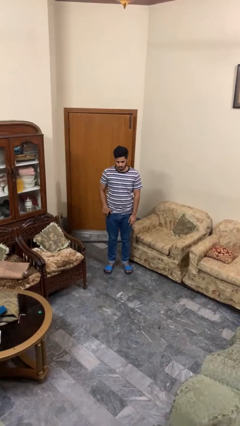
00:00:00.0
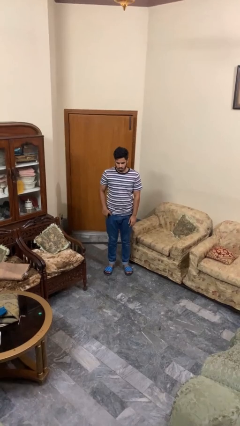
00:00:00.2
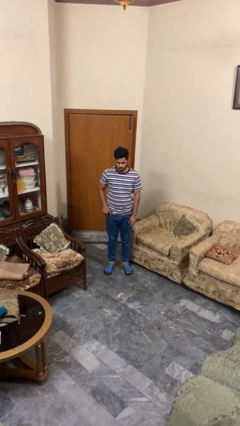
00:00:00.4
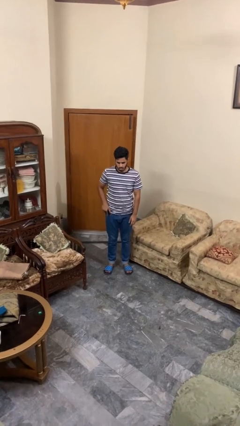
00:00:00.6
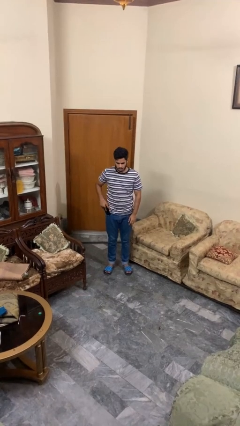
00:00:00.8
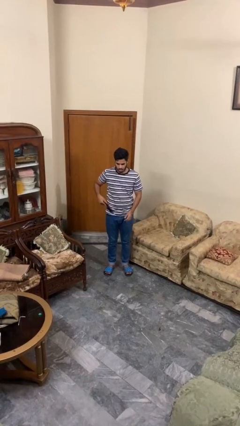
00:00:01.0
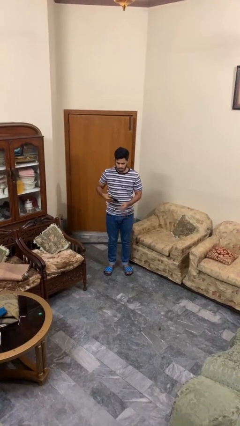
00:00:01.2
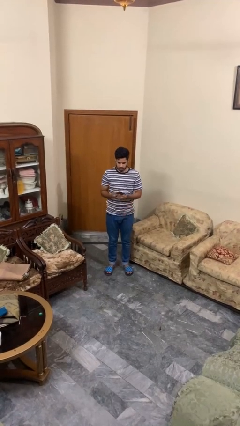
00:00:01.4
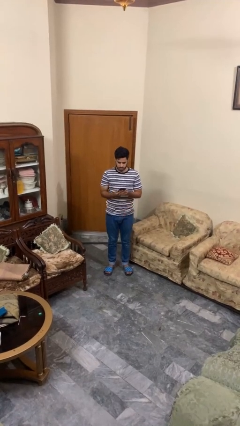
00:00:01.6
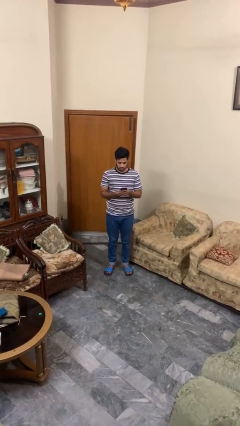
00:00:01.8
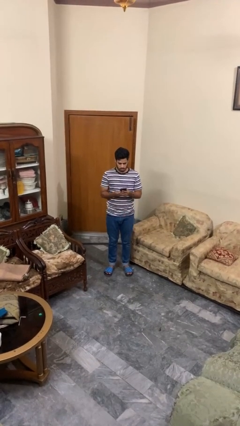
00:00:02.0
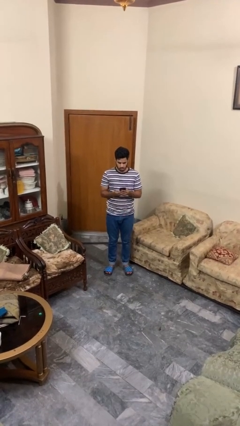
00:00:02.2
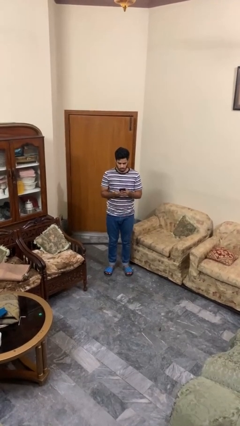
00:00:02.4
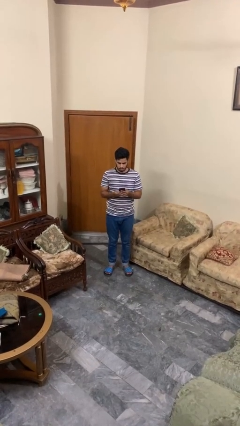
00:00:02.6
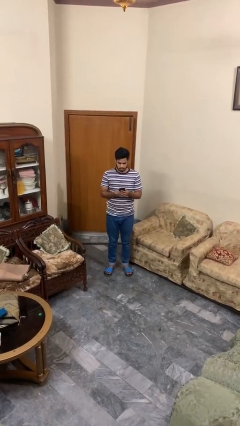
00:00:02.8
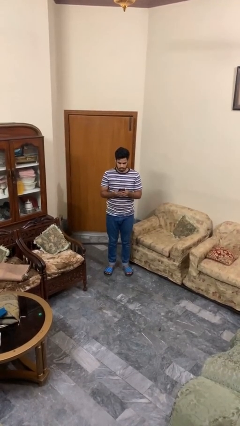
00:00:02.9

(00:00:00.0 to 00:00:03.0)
person takes phone from pocket

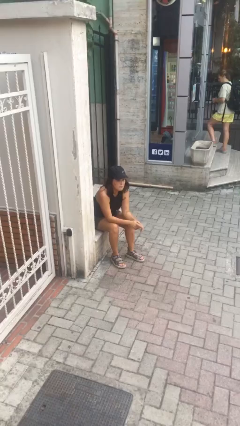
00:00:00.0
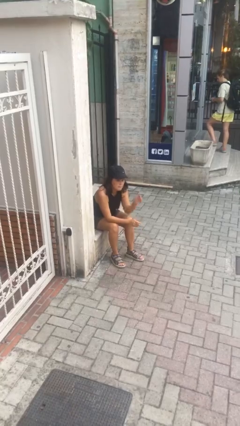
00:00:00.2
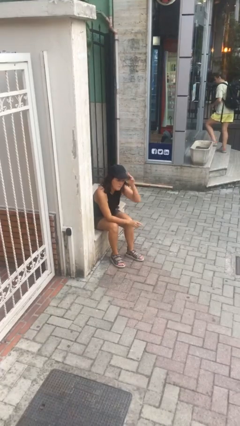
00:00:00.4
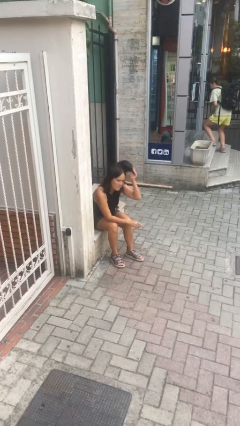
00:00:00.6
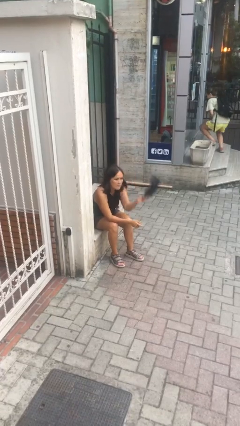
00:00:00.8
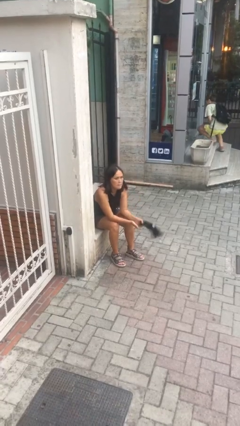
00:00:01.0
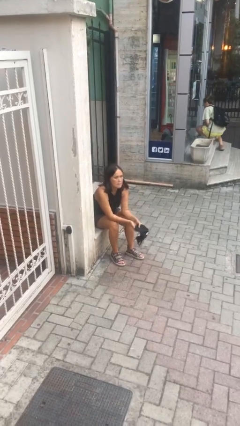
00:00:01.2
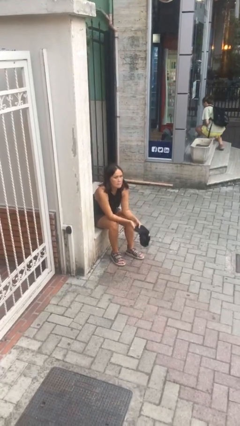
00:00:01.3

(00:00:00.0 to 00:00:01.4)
person takes off hat

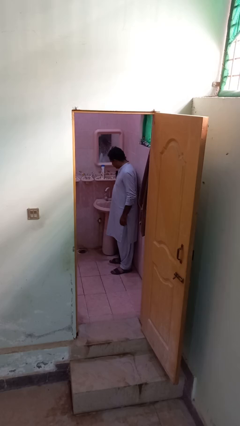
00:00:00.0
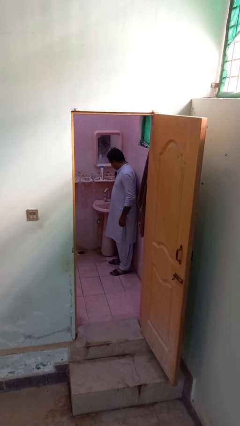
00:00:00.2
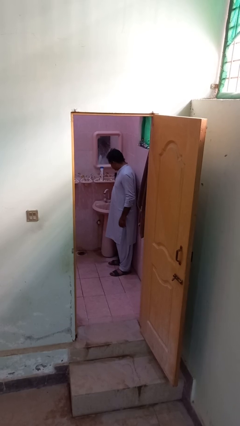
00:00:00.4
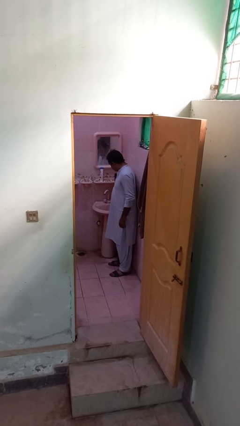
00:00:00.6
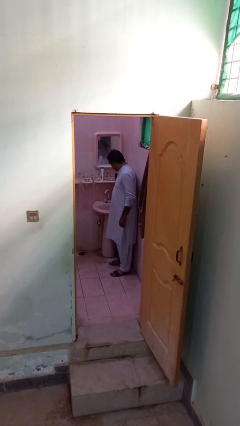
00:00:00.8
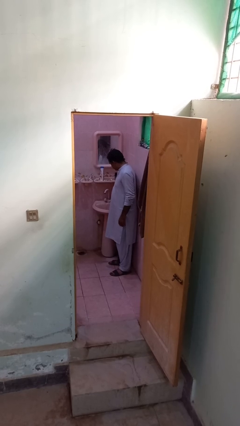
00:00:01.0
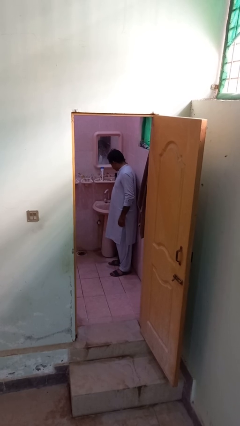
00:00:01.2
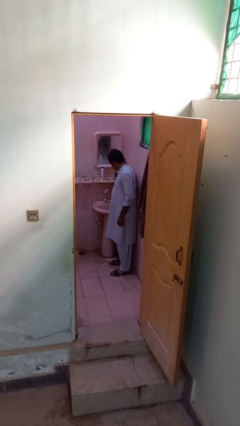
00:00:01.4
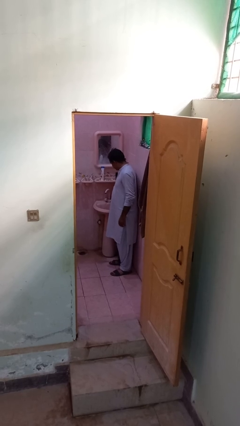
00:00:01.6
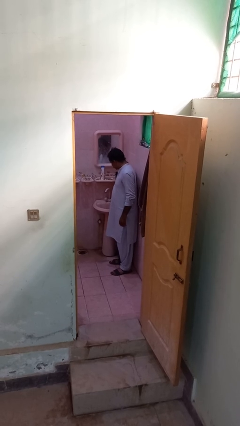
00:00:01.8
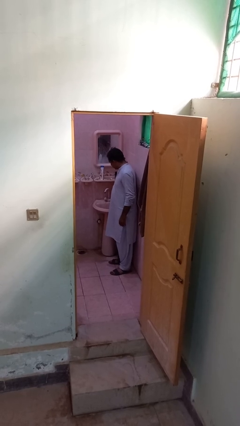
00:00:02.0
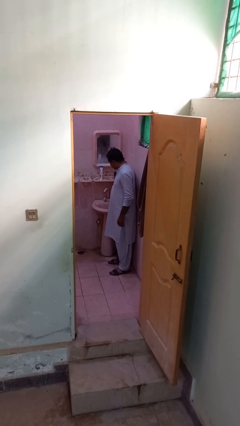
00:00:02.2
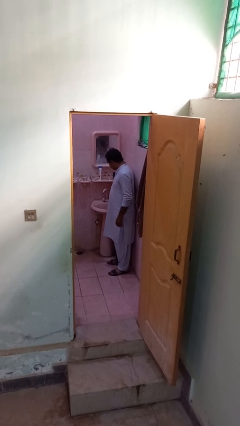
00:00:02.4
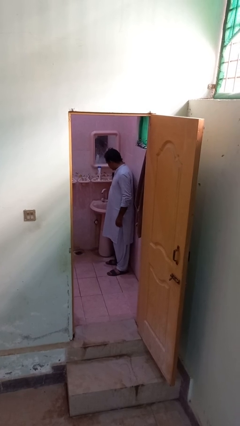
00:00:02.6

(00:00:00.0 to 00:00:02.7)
person turns off faucet

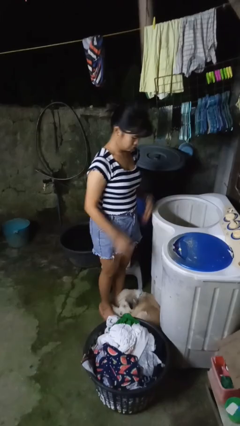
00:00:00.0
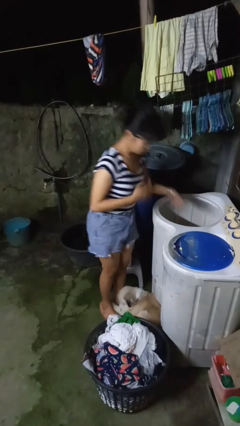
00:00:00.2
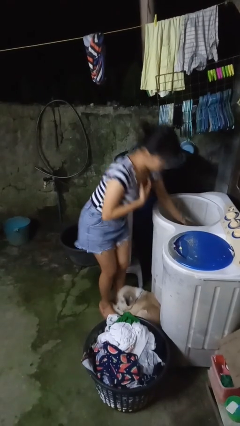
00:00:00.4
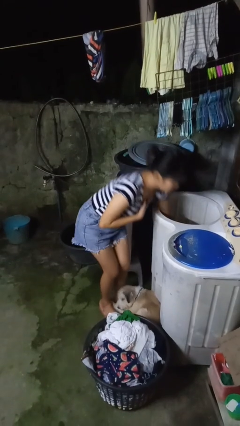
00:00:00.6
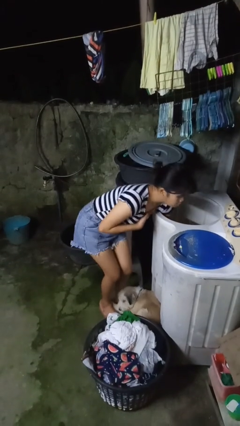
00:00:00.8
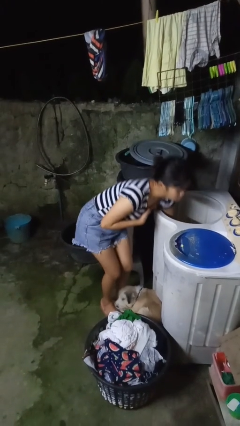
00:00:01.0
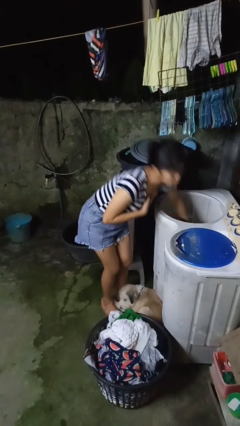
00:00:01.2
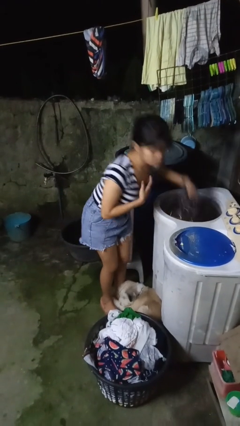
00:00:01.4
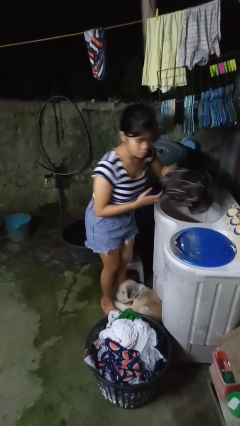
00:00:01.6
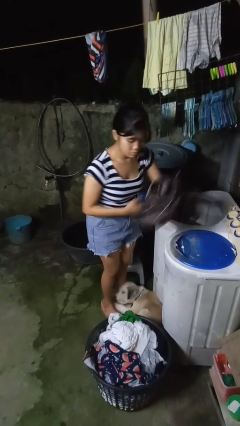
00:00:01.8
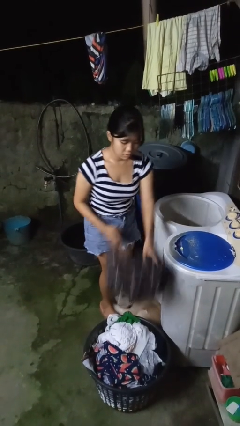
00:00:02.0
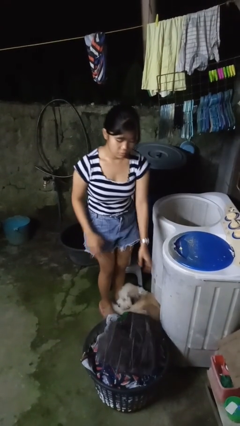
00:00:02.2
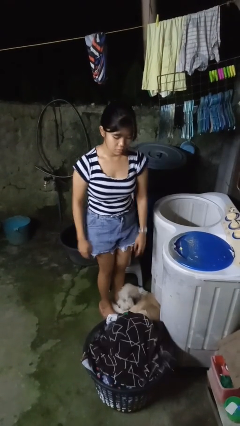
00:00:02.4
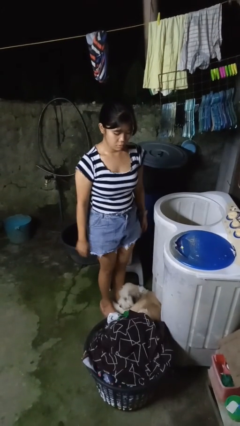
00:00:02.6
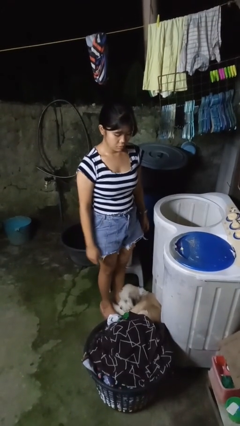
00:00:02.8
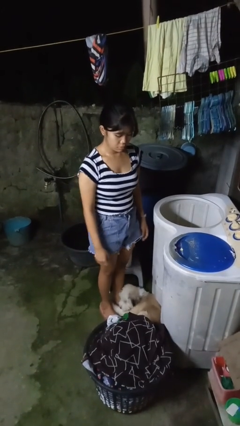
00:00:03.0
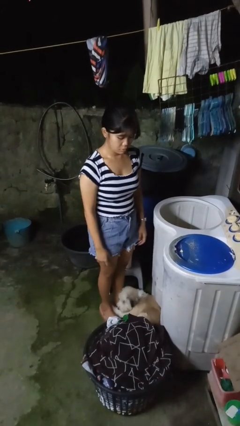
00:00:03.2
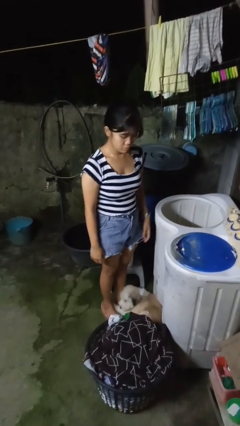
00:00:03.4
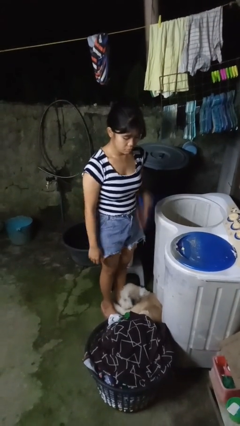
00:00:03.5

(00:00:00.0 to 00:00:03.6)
person unloads clotheswasher

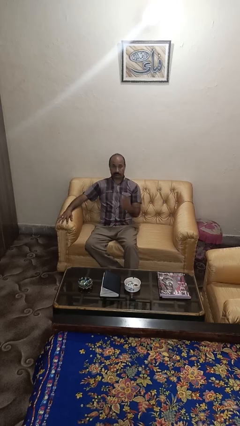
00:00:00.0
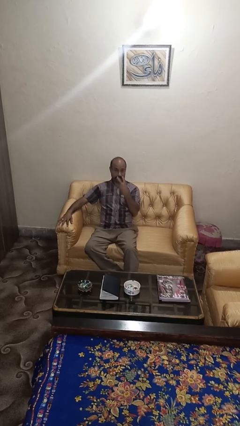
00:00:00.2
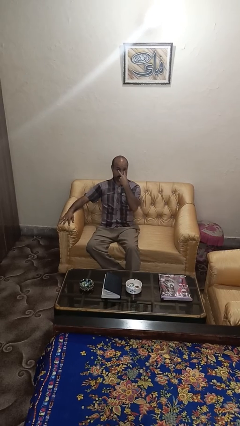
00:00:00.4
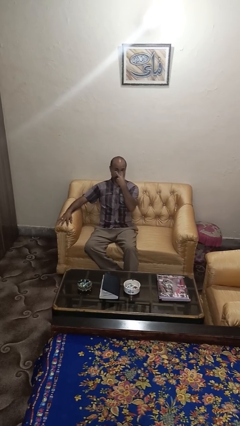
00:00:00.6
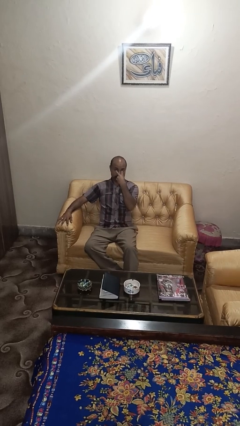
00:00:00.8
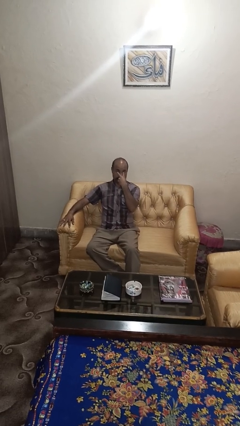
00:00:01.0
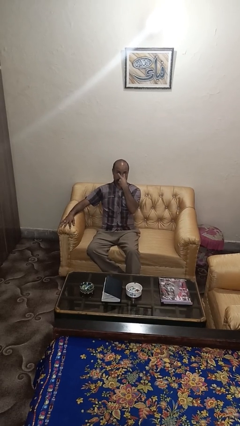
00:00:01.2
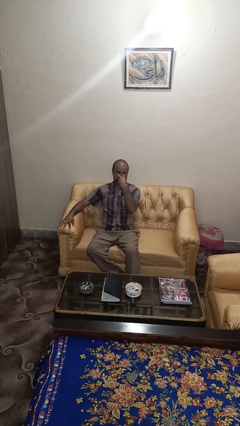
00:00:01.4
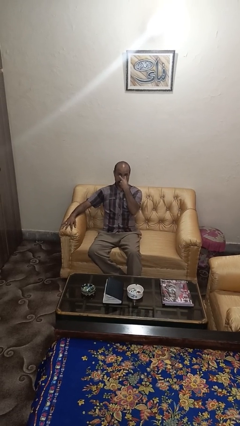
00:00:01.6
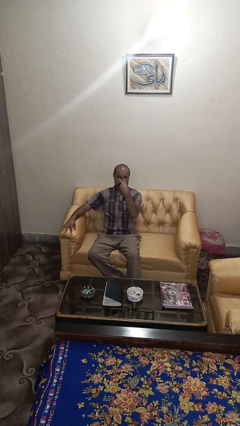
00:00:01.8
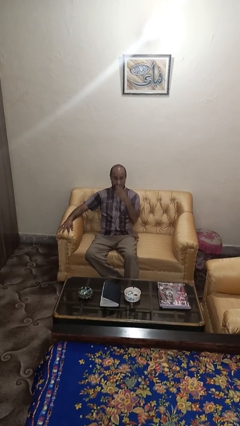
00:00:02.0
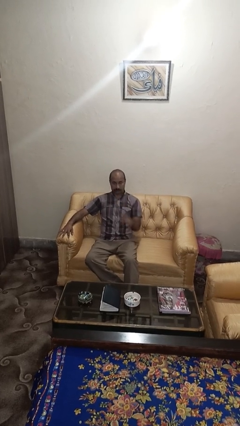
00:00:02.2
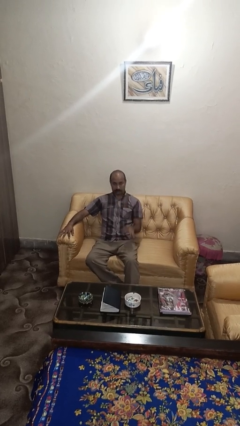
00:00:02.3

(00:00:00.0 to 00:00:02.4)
person gestures watch closely

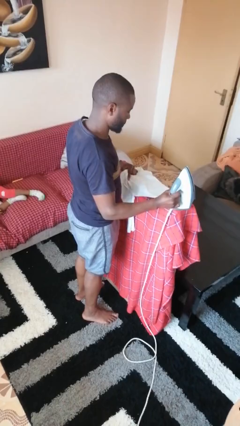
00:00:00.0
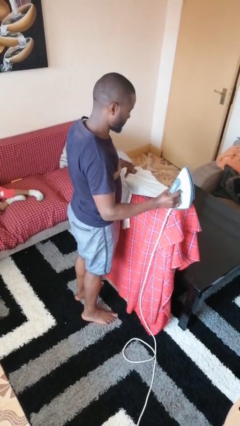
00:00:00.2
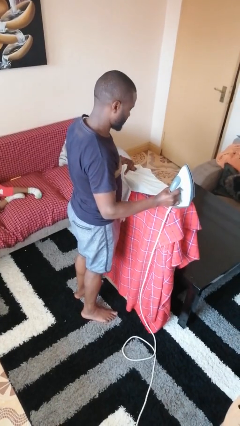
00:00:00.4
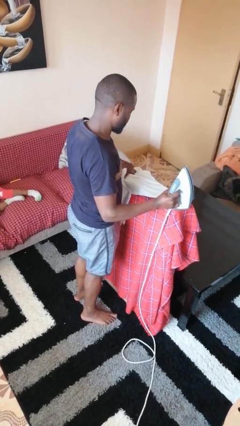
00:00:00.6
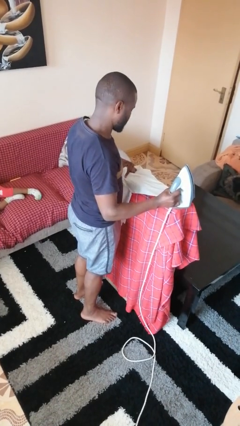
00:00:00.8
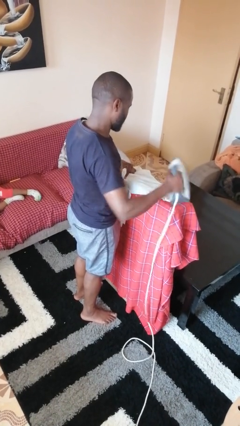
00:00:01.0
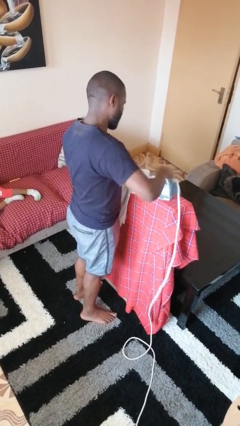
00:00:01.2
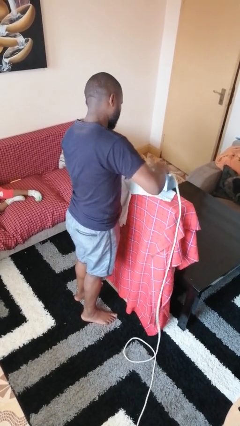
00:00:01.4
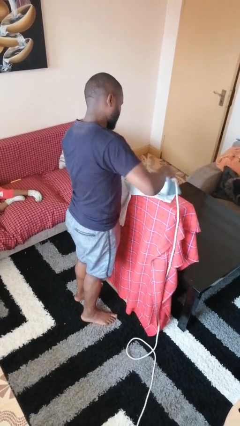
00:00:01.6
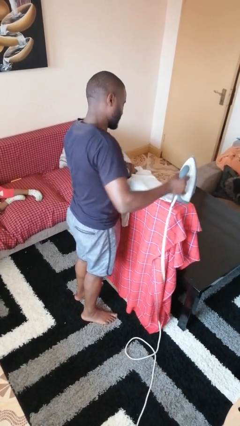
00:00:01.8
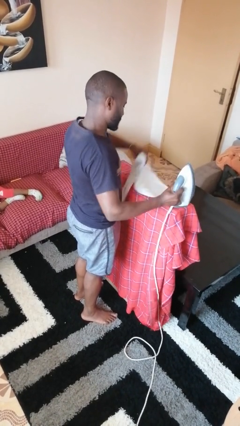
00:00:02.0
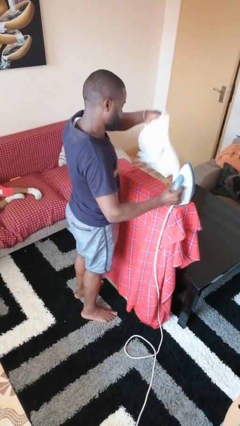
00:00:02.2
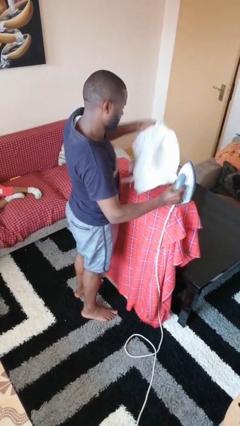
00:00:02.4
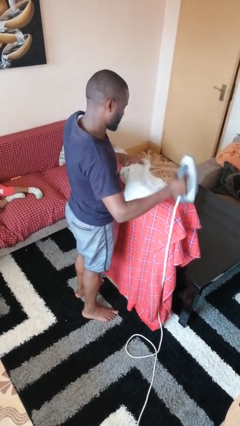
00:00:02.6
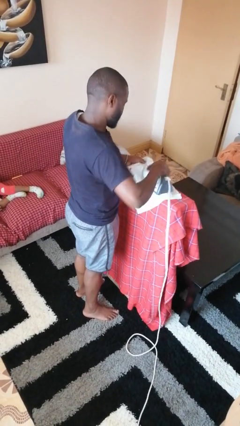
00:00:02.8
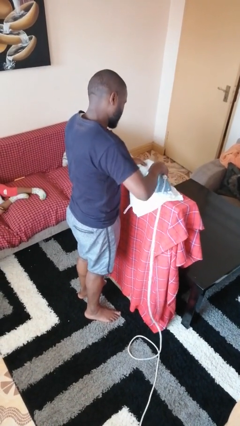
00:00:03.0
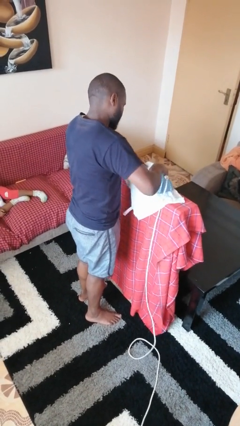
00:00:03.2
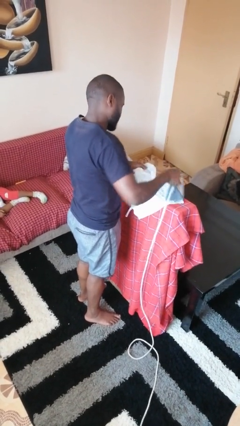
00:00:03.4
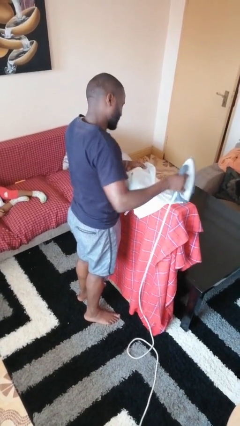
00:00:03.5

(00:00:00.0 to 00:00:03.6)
person irons clothes

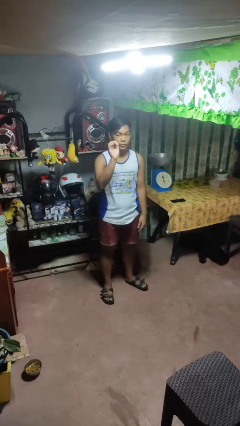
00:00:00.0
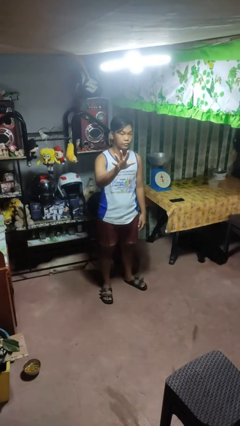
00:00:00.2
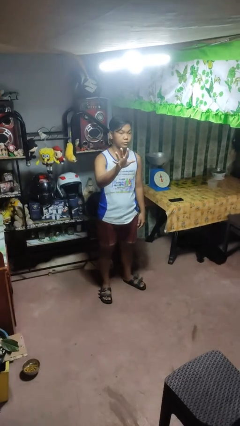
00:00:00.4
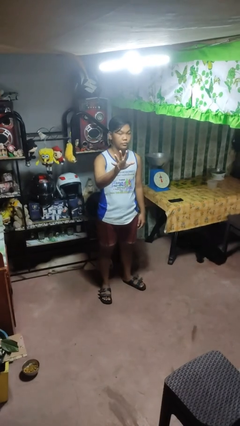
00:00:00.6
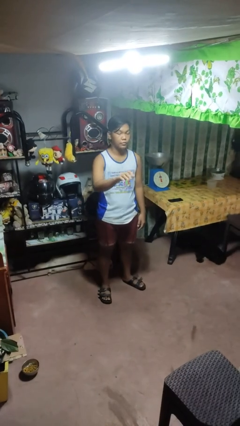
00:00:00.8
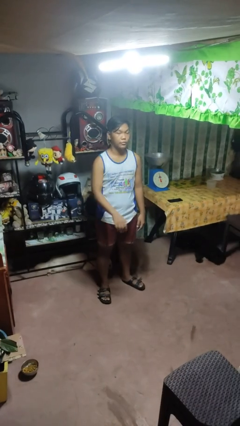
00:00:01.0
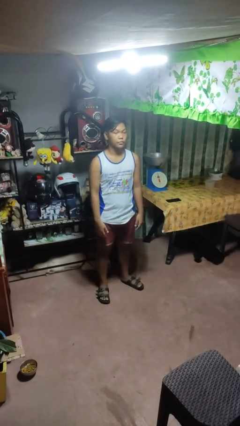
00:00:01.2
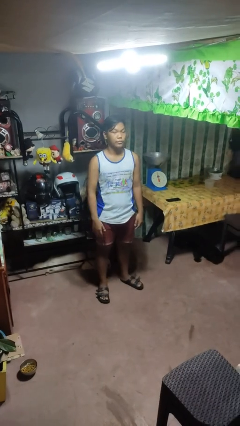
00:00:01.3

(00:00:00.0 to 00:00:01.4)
person gestures number five
